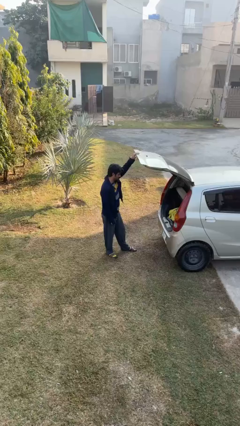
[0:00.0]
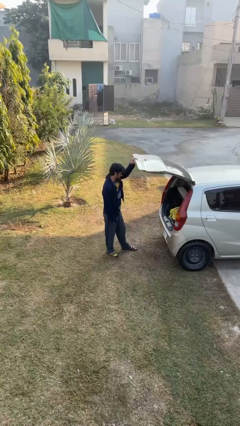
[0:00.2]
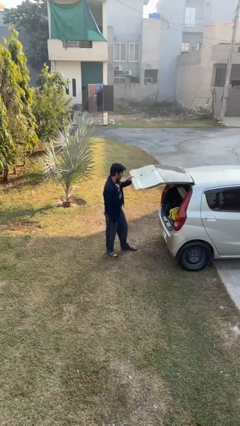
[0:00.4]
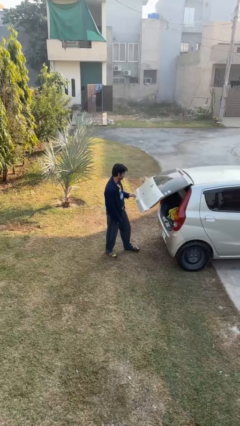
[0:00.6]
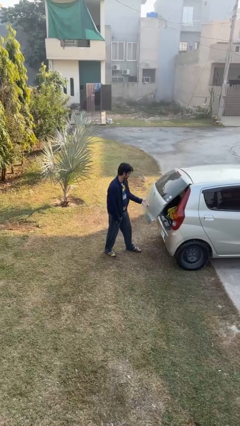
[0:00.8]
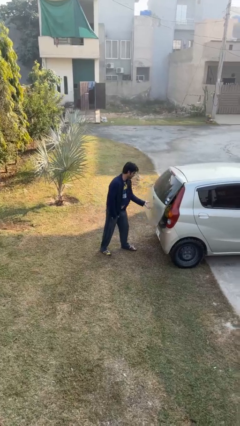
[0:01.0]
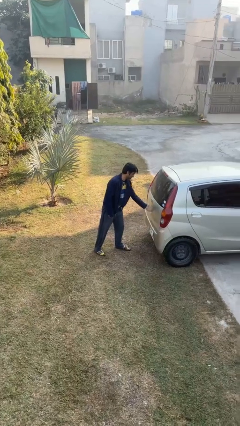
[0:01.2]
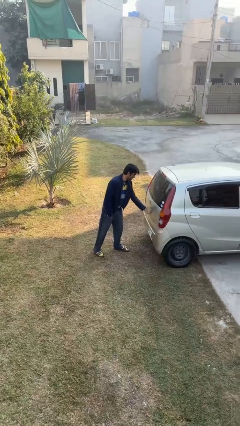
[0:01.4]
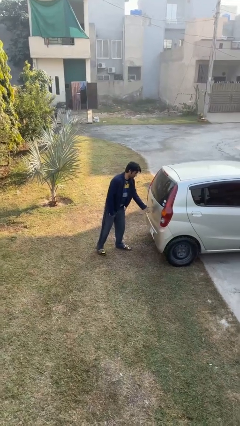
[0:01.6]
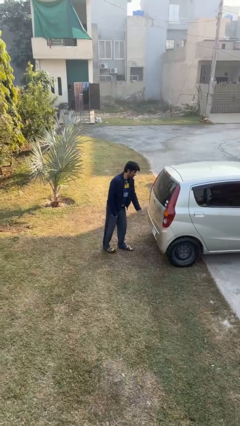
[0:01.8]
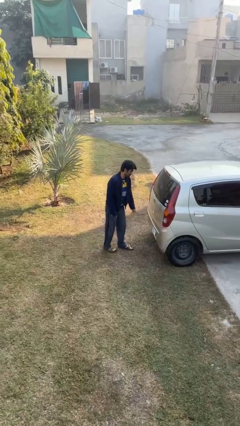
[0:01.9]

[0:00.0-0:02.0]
person closes car trunk

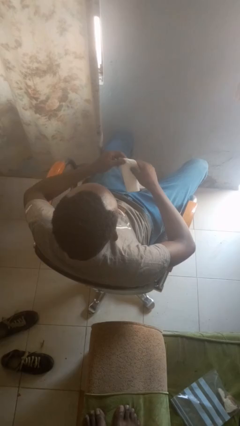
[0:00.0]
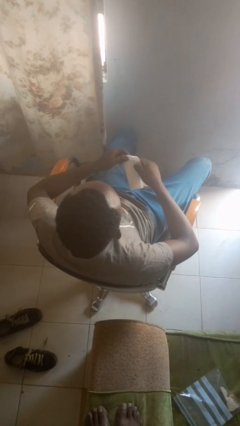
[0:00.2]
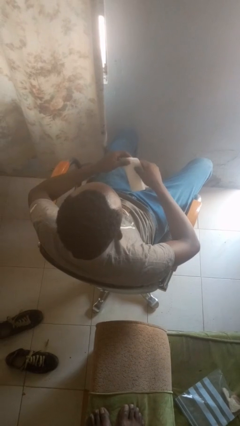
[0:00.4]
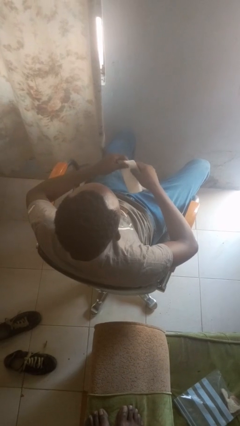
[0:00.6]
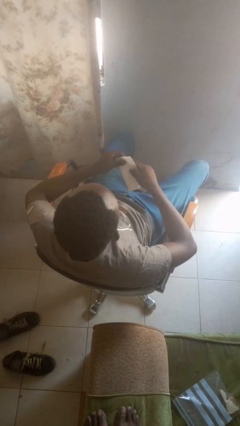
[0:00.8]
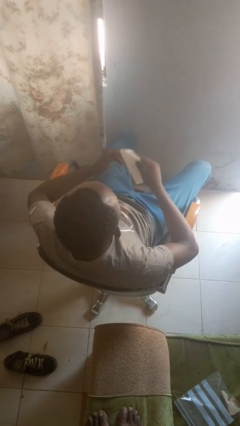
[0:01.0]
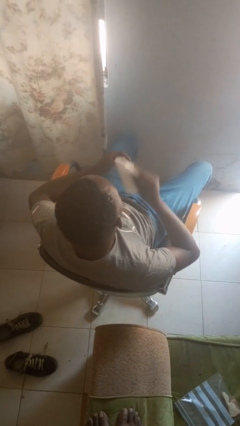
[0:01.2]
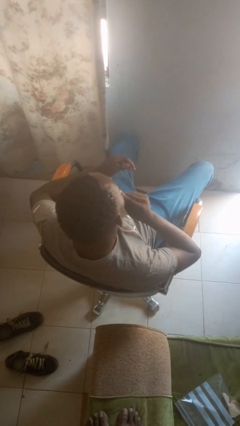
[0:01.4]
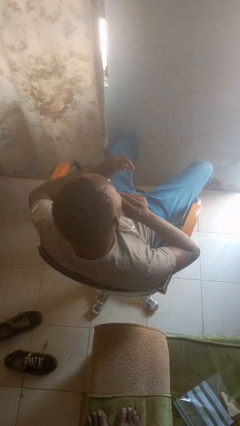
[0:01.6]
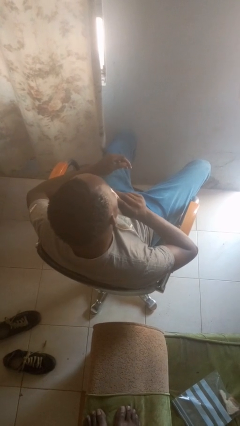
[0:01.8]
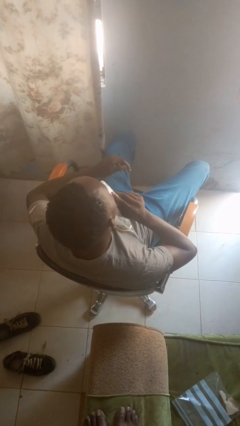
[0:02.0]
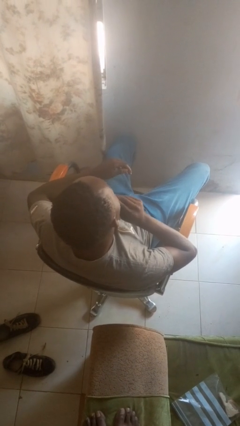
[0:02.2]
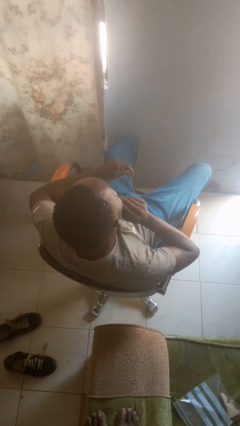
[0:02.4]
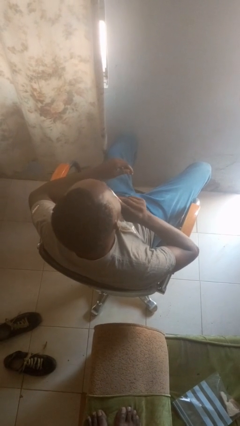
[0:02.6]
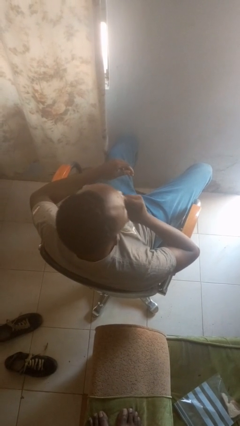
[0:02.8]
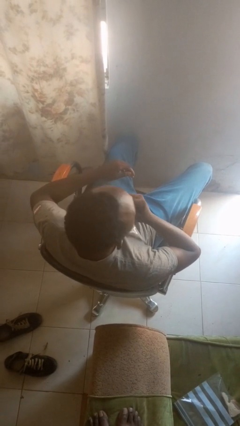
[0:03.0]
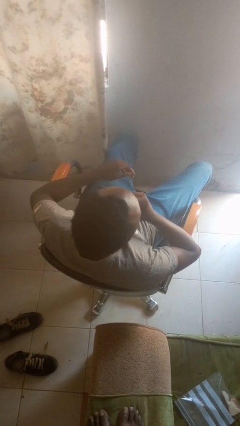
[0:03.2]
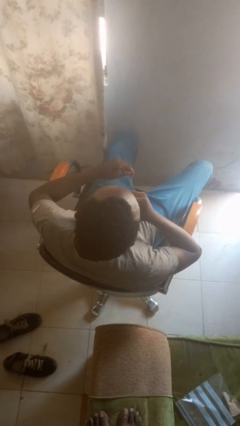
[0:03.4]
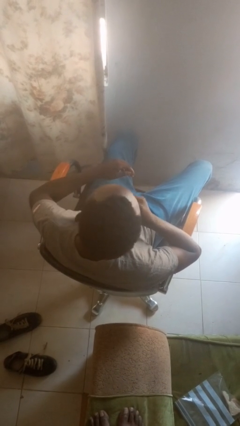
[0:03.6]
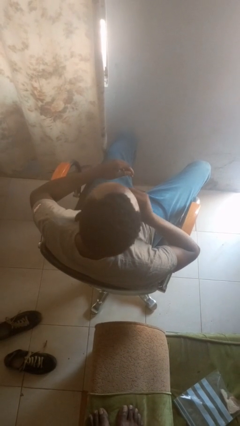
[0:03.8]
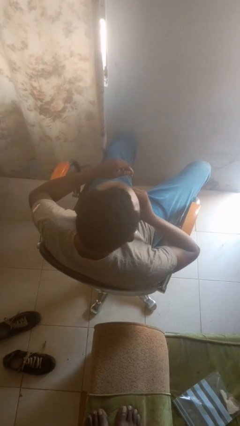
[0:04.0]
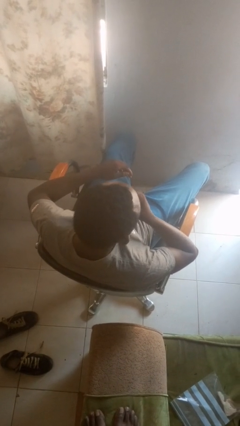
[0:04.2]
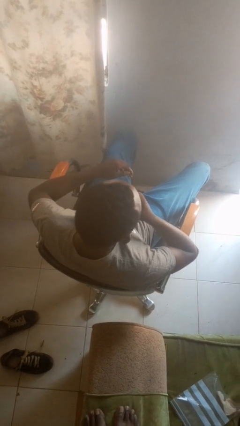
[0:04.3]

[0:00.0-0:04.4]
person wipes mouth with napkin

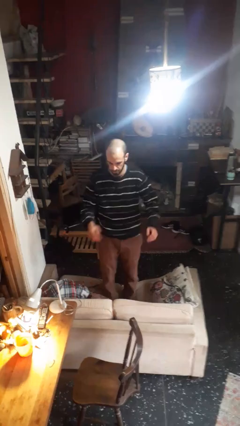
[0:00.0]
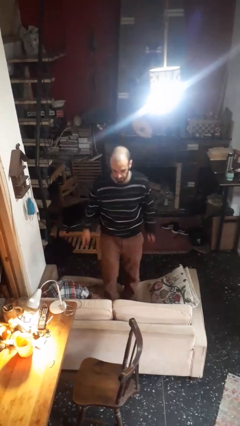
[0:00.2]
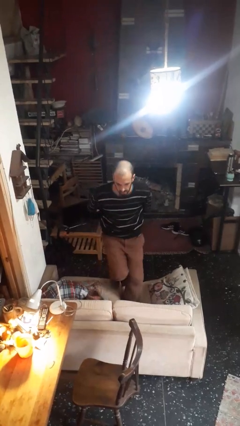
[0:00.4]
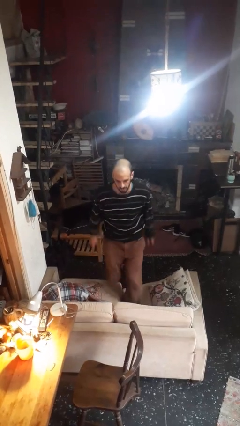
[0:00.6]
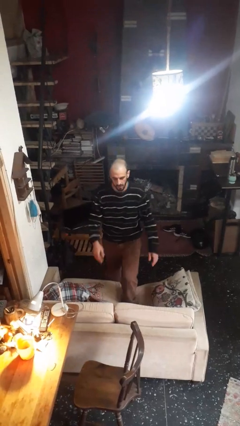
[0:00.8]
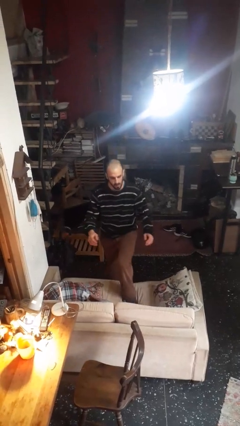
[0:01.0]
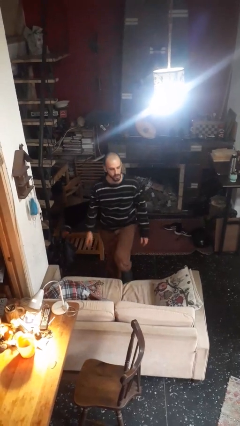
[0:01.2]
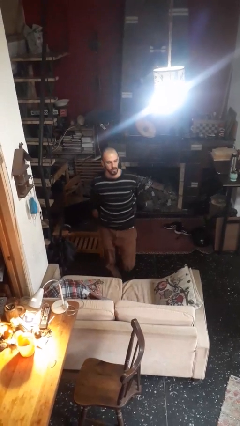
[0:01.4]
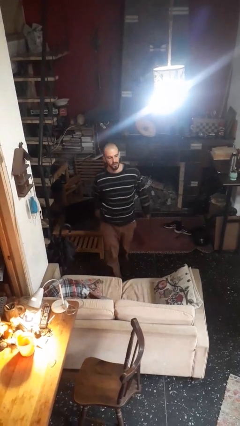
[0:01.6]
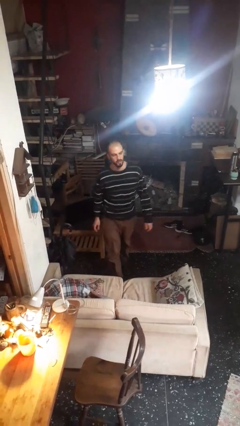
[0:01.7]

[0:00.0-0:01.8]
person climbs off couch

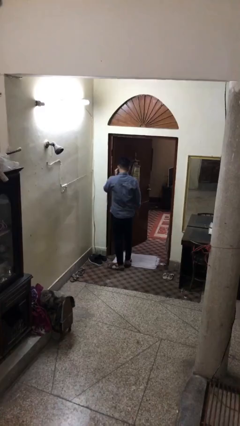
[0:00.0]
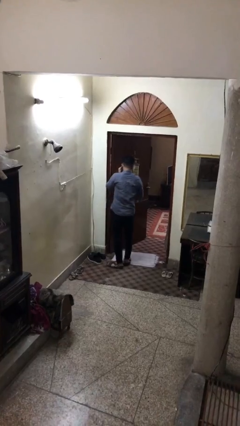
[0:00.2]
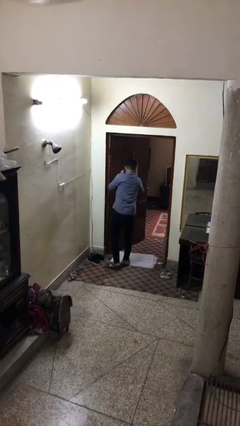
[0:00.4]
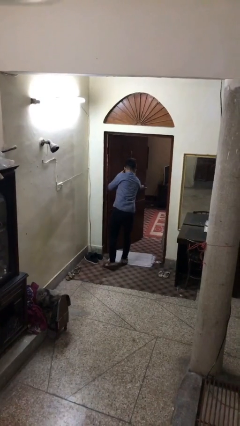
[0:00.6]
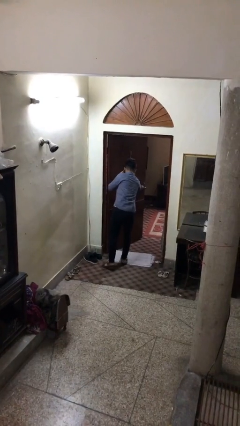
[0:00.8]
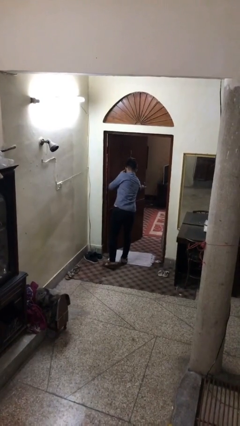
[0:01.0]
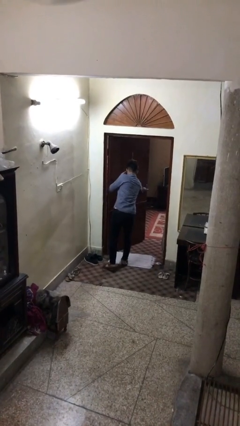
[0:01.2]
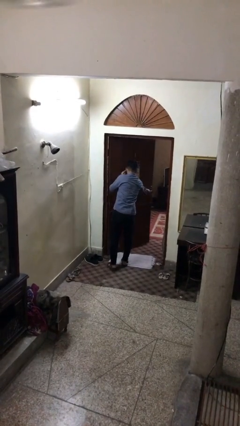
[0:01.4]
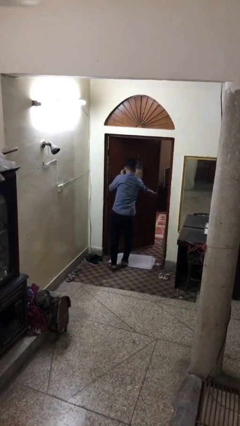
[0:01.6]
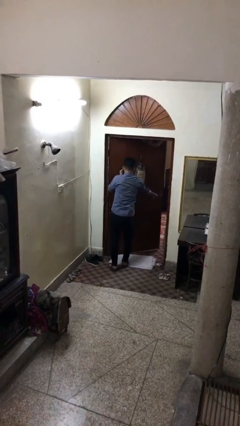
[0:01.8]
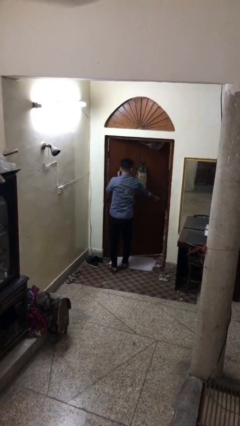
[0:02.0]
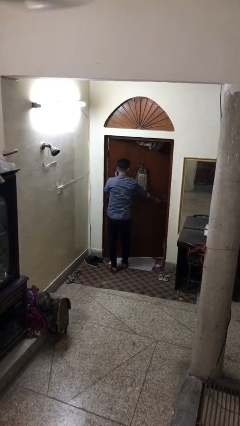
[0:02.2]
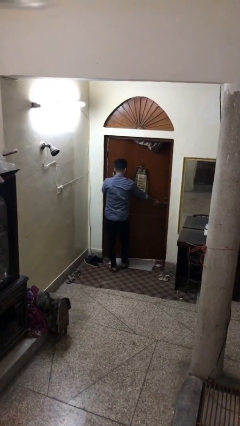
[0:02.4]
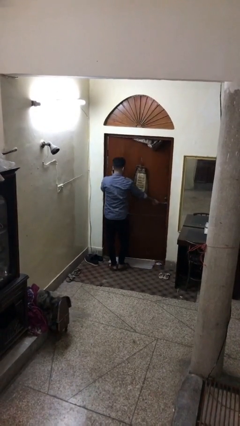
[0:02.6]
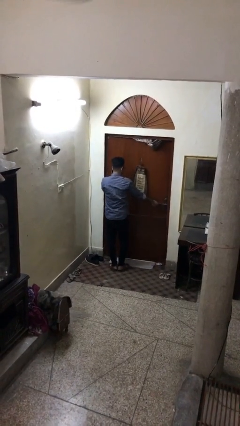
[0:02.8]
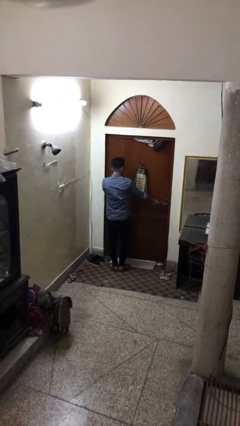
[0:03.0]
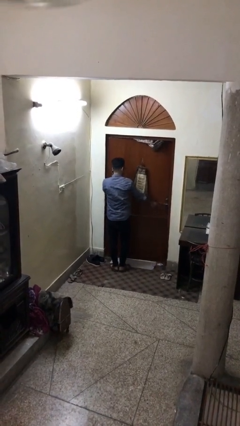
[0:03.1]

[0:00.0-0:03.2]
person closes facility door

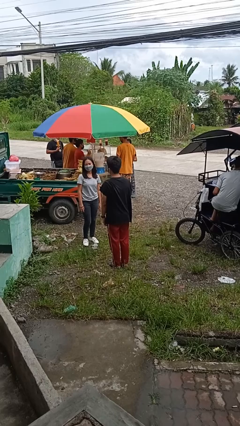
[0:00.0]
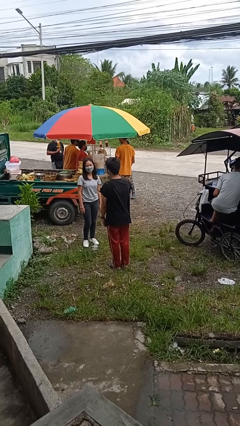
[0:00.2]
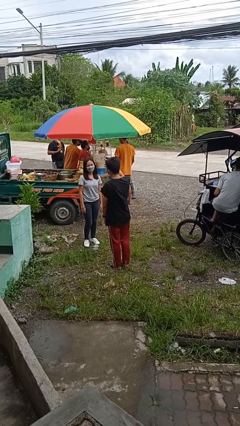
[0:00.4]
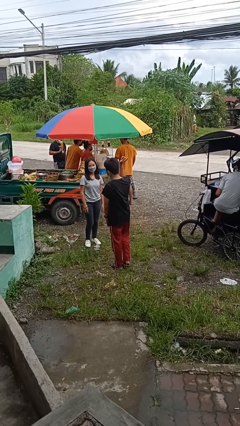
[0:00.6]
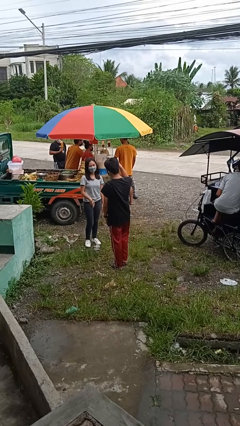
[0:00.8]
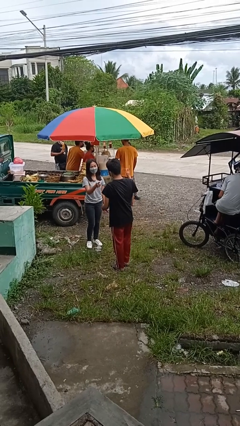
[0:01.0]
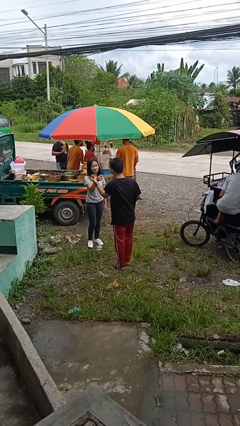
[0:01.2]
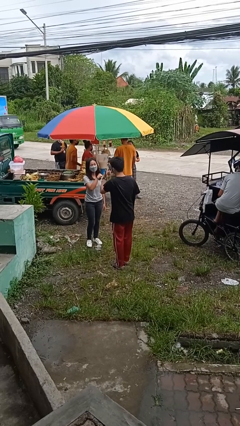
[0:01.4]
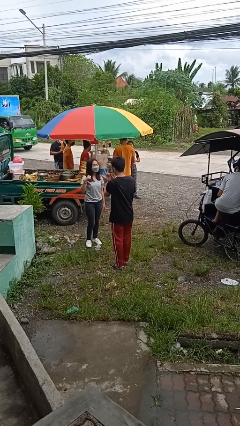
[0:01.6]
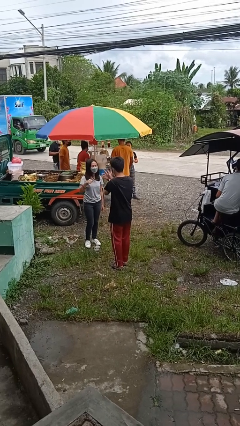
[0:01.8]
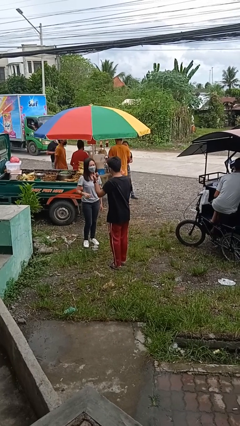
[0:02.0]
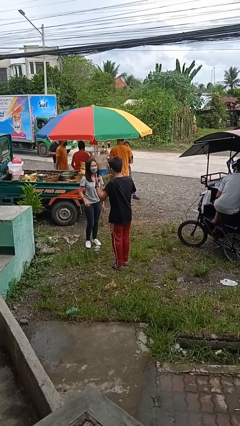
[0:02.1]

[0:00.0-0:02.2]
person talks to person

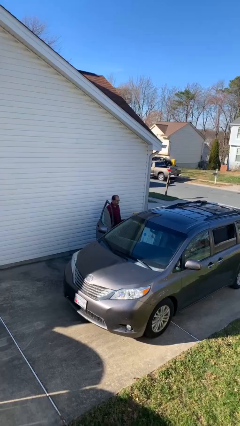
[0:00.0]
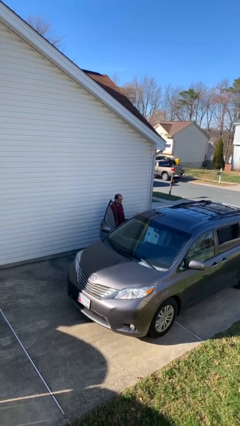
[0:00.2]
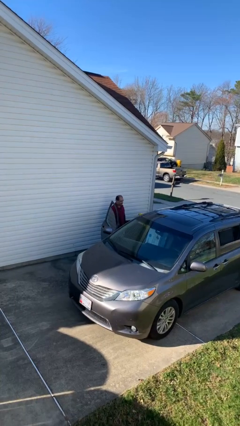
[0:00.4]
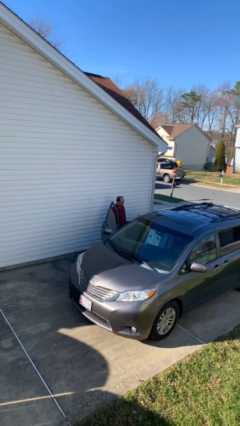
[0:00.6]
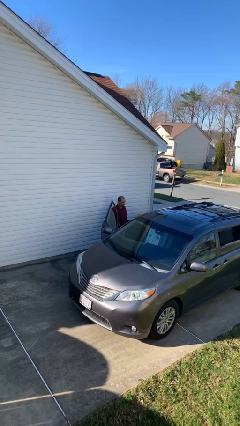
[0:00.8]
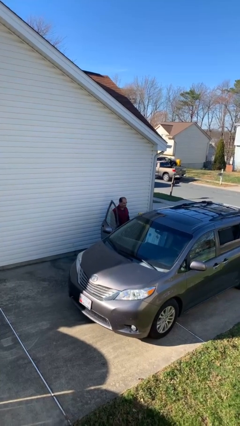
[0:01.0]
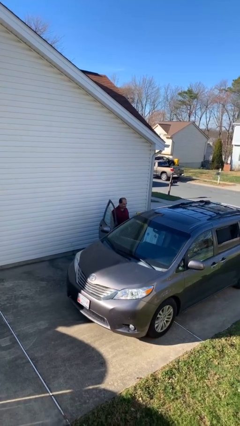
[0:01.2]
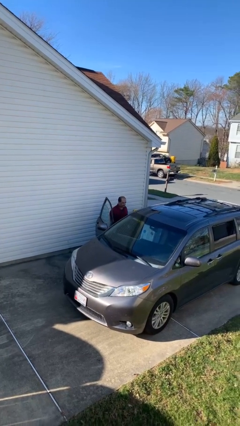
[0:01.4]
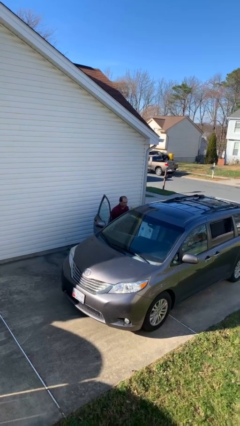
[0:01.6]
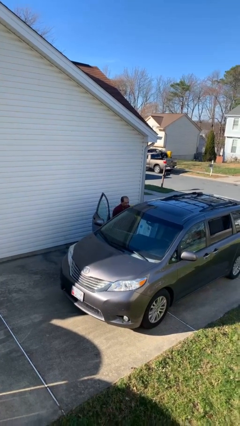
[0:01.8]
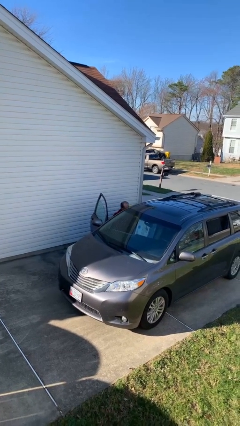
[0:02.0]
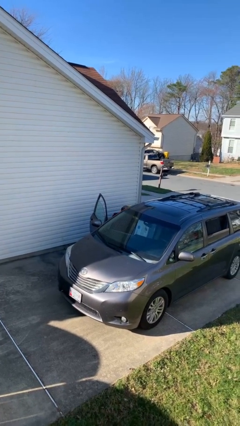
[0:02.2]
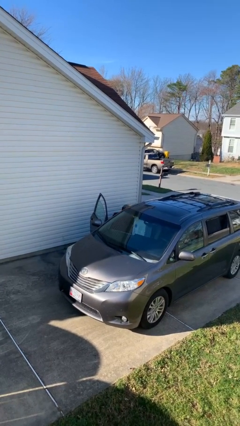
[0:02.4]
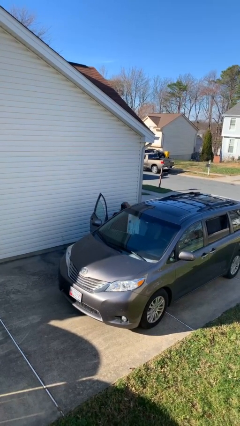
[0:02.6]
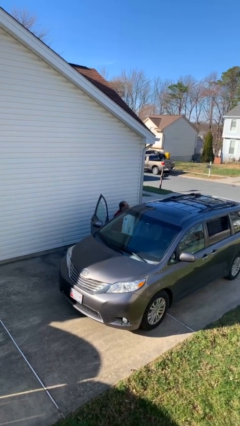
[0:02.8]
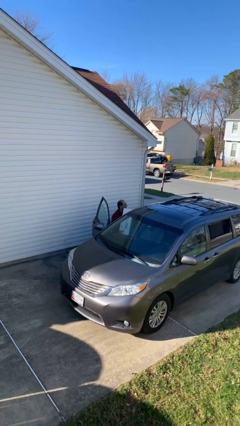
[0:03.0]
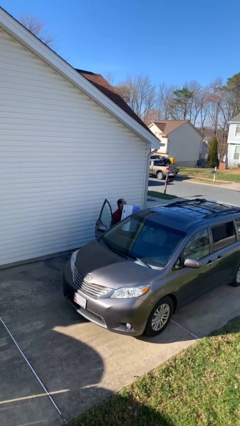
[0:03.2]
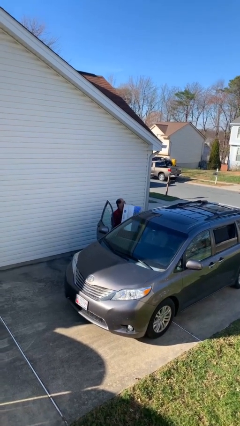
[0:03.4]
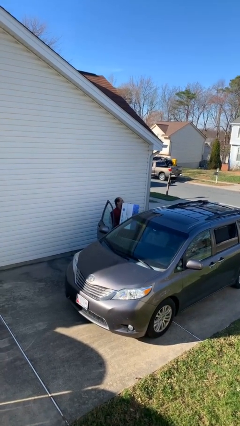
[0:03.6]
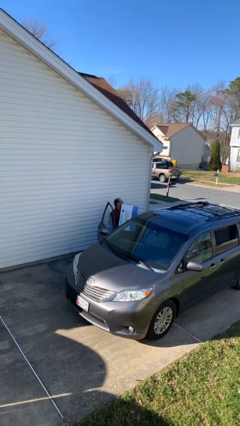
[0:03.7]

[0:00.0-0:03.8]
person unloads car

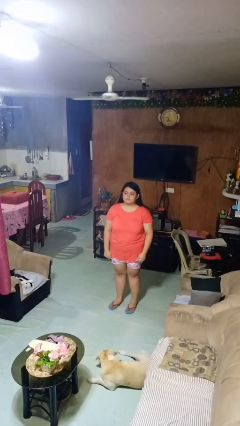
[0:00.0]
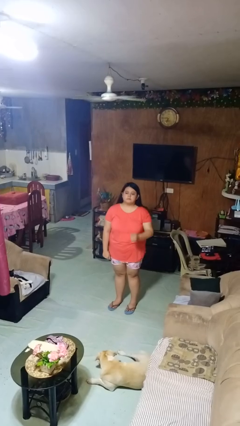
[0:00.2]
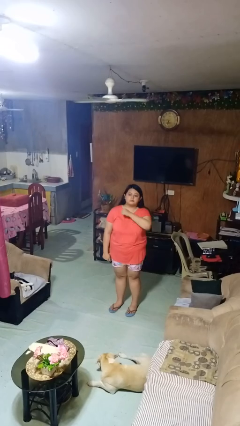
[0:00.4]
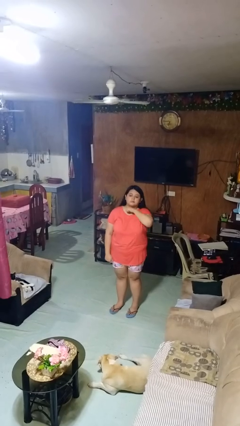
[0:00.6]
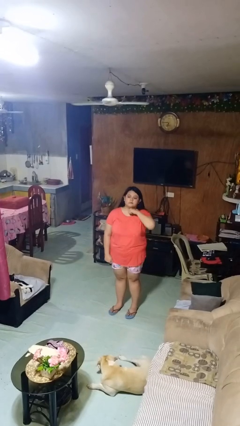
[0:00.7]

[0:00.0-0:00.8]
person gestures cut
